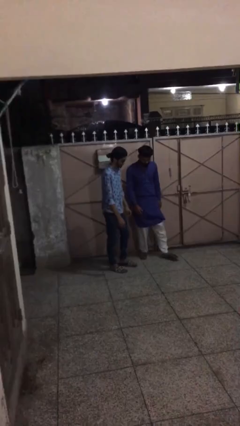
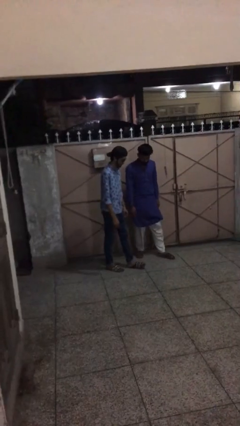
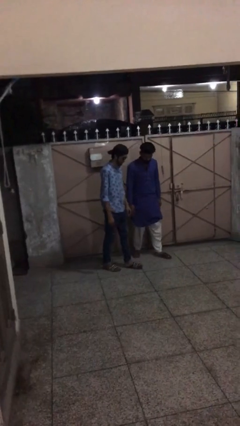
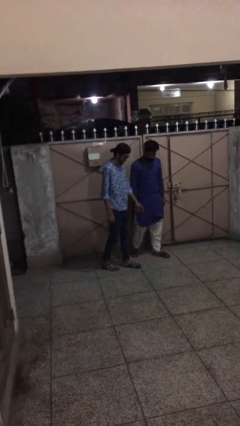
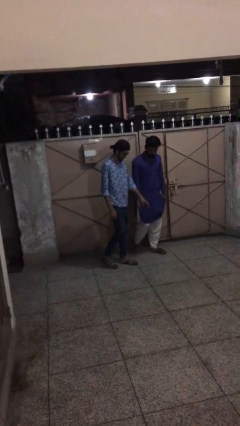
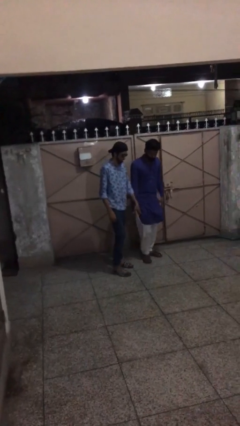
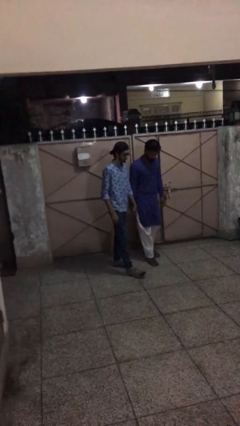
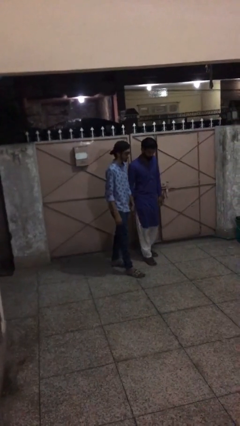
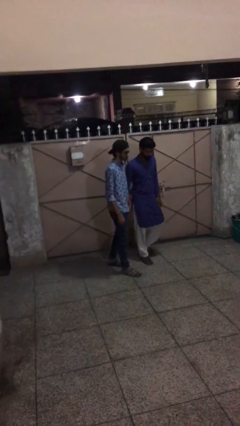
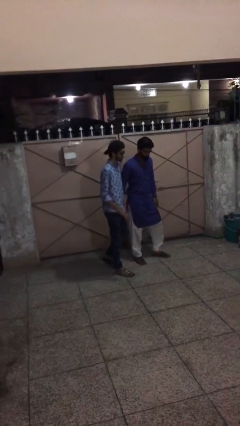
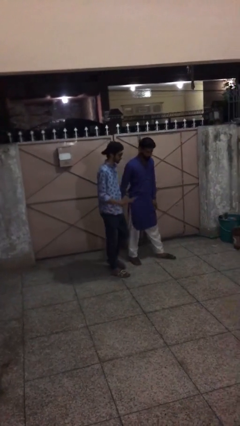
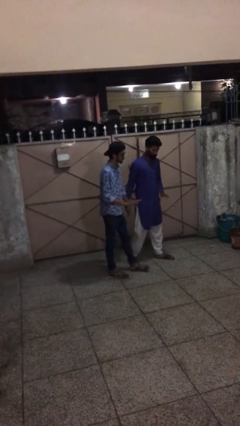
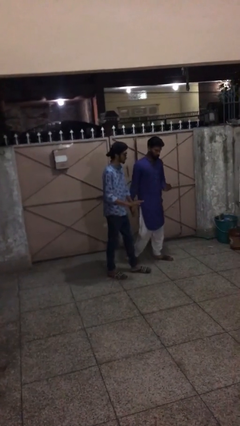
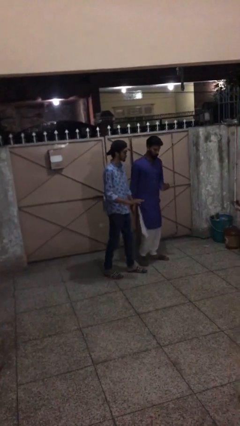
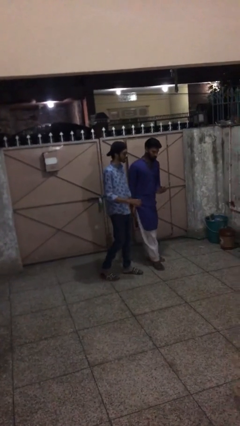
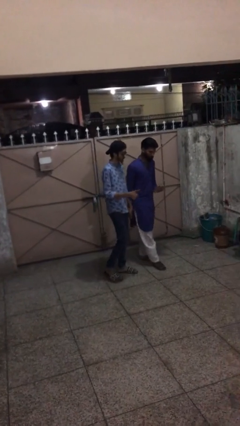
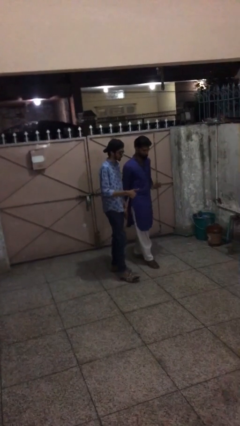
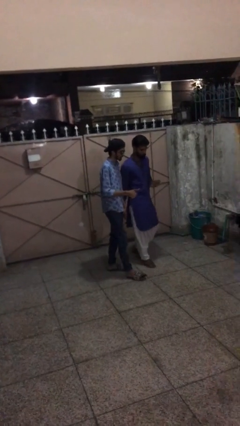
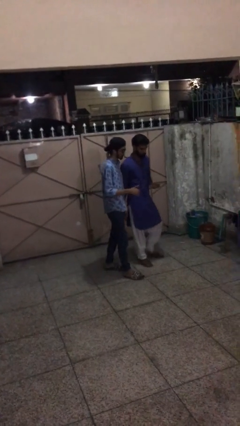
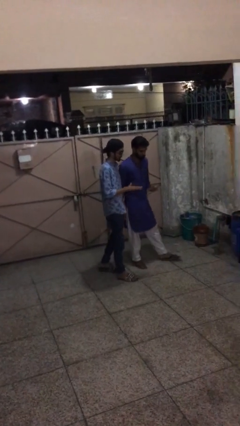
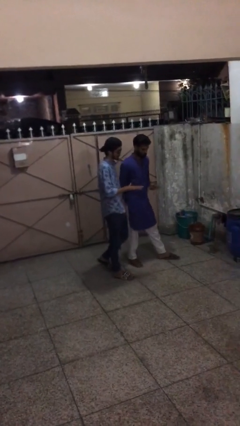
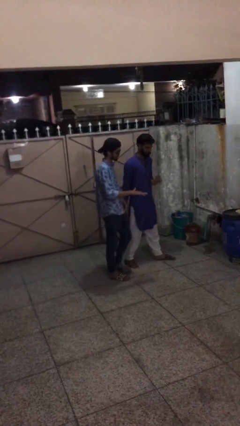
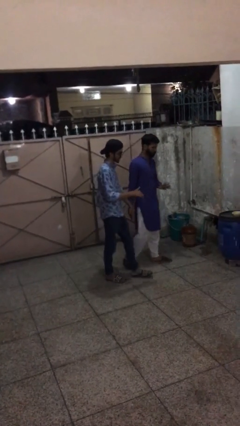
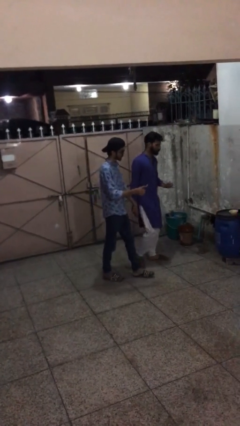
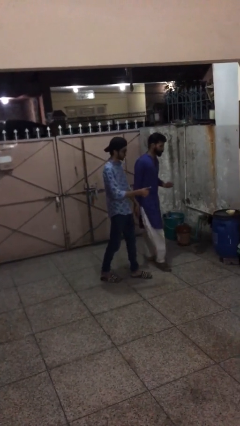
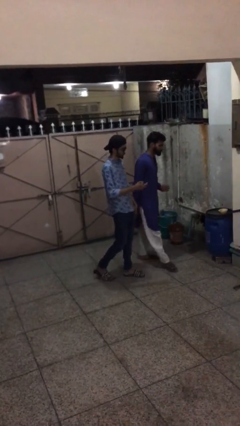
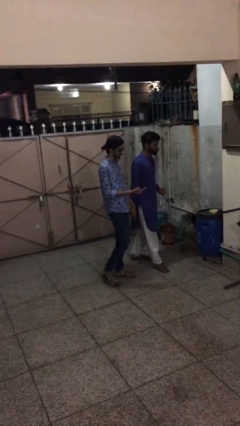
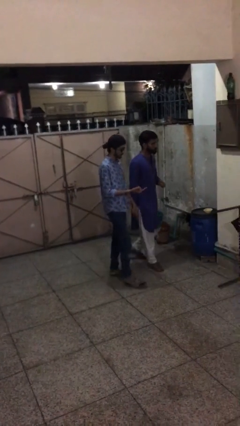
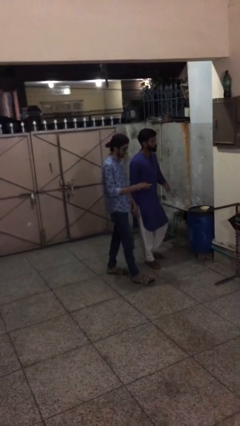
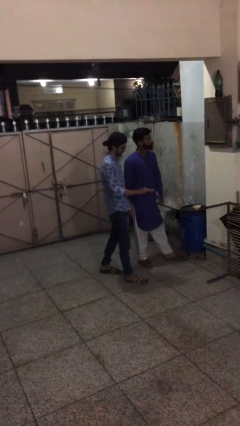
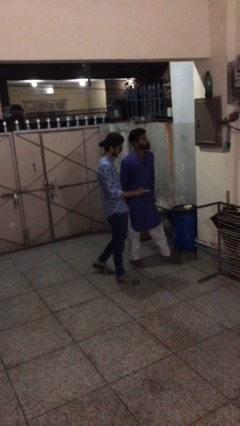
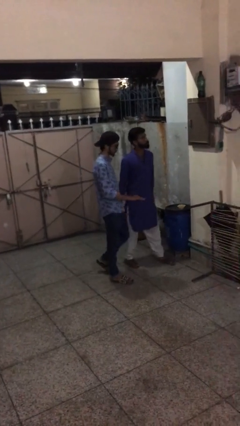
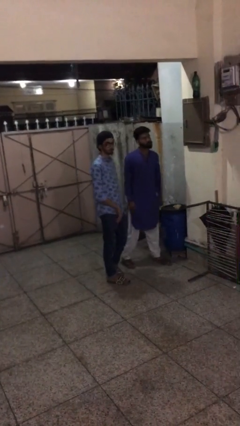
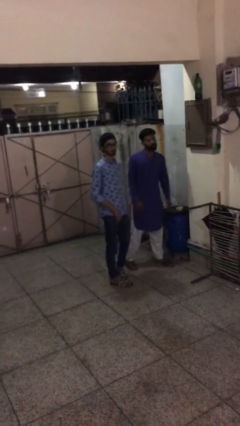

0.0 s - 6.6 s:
person holds hand

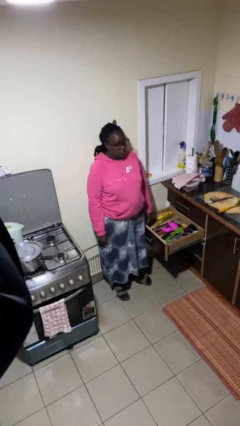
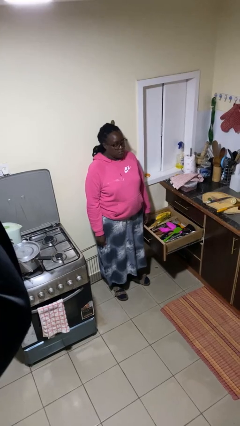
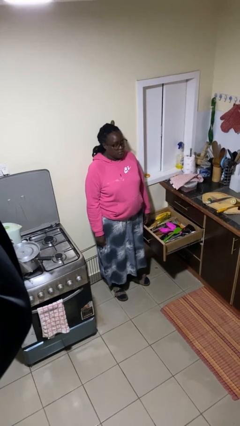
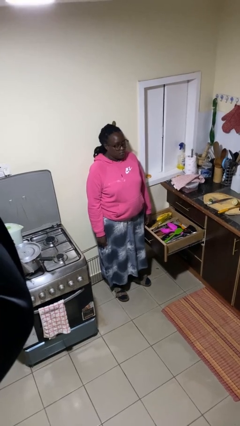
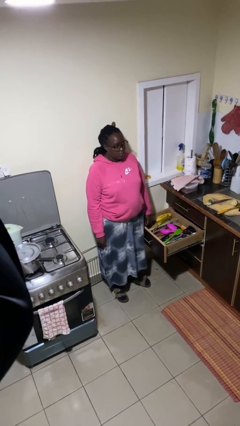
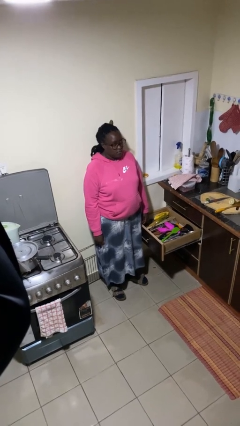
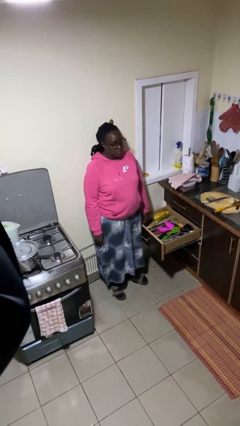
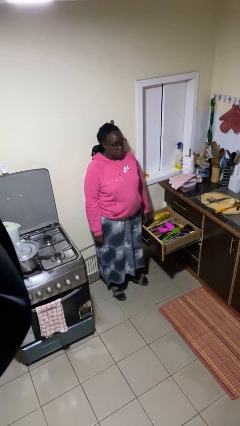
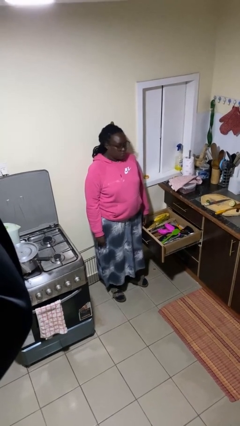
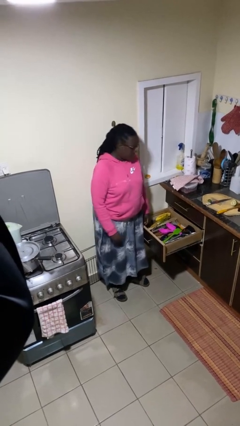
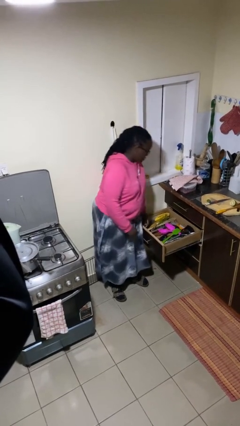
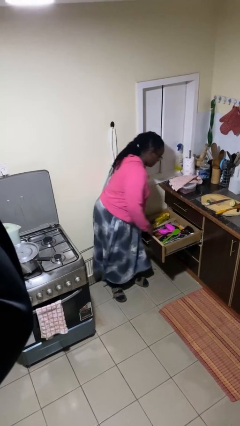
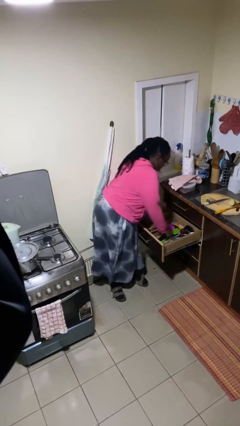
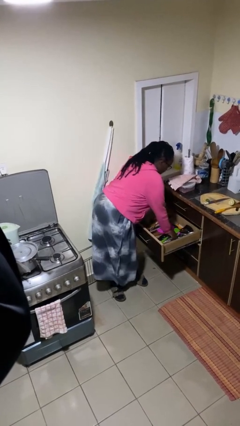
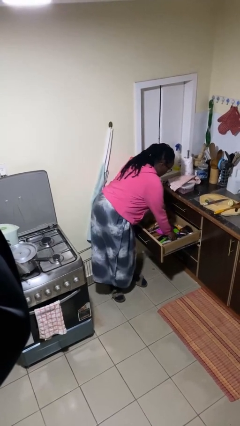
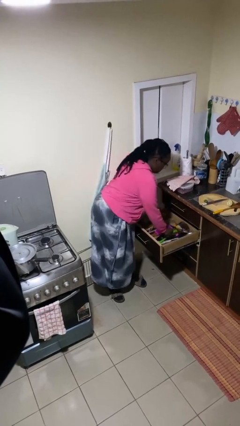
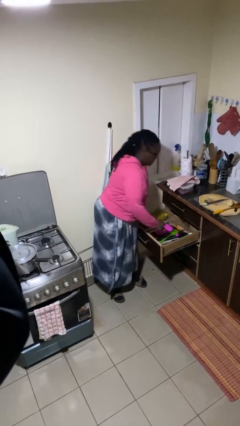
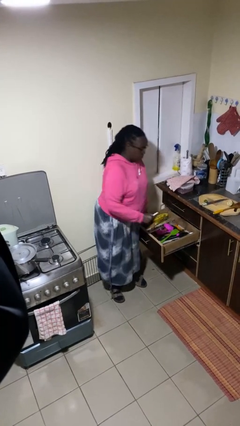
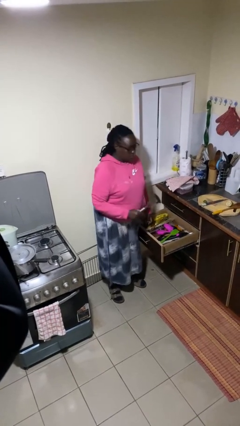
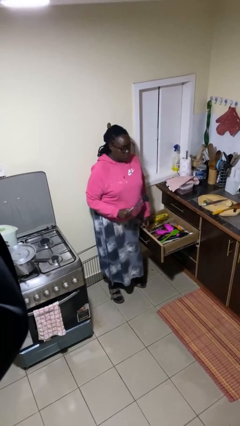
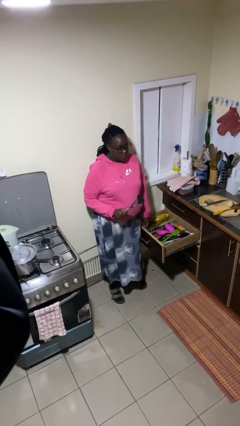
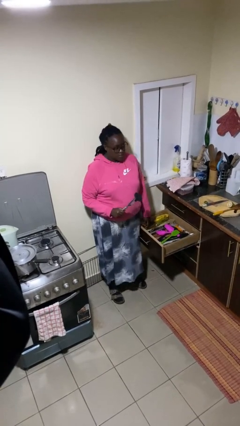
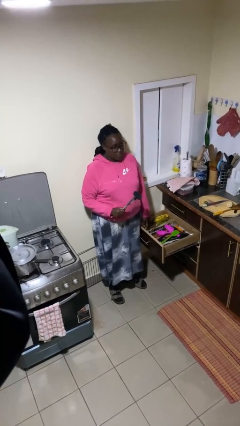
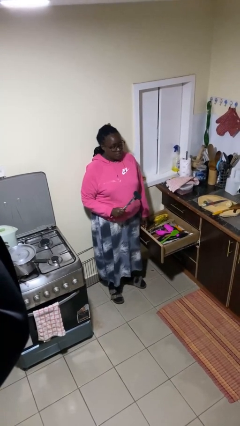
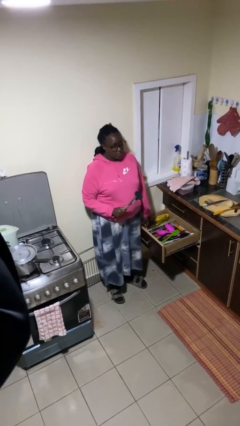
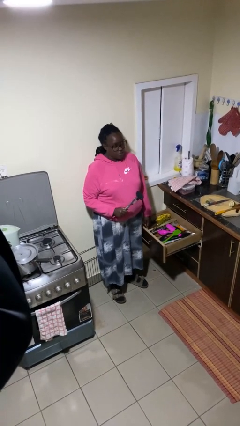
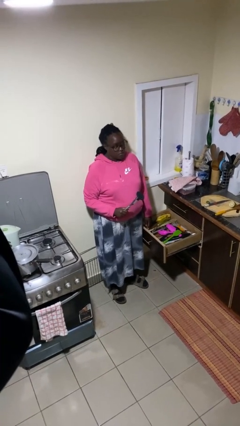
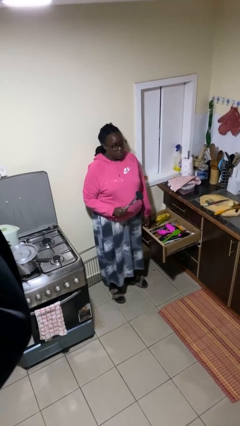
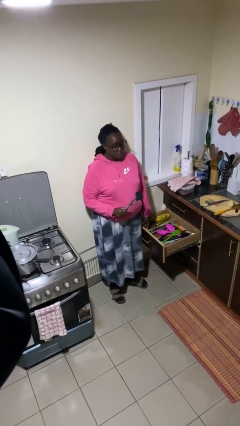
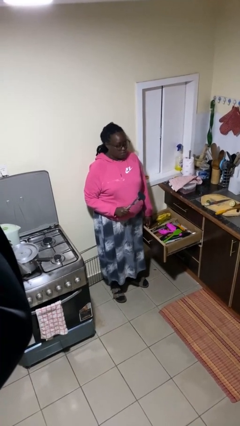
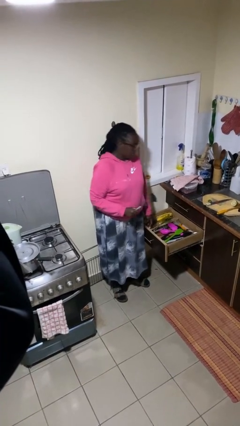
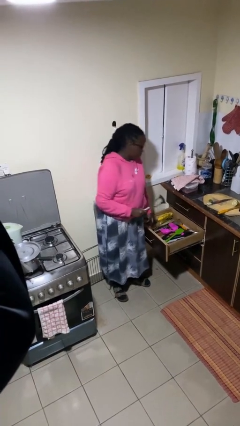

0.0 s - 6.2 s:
person takes object from kitchen drawer

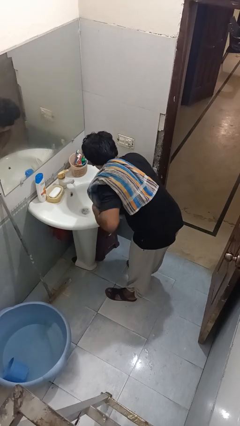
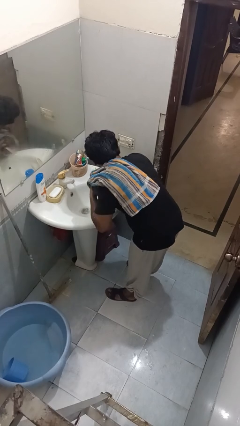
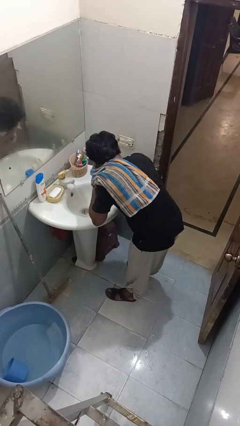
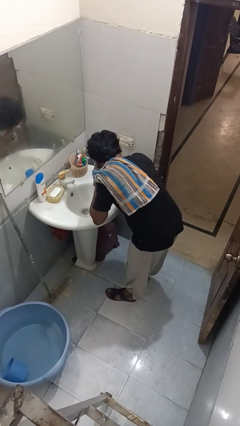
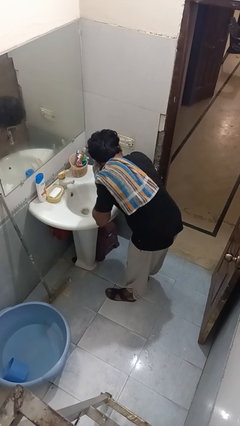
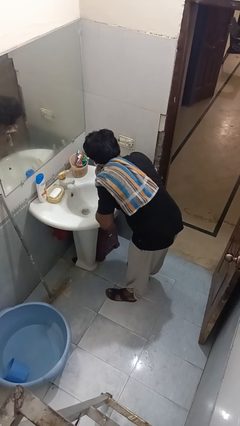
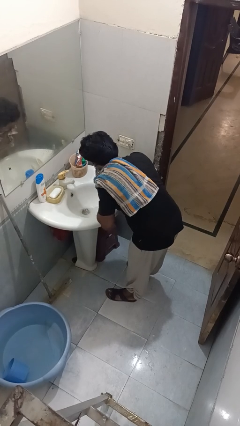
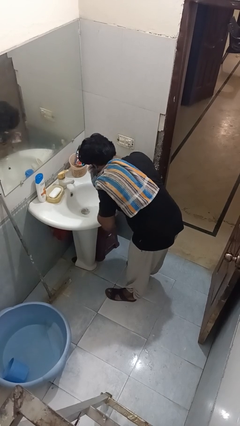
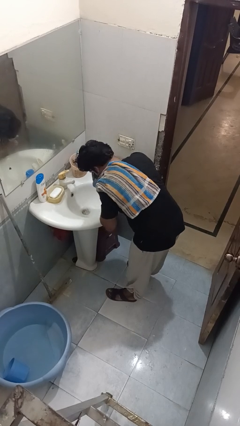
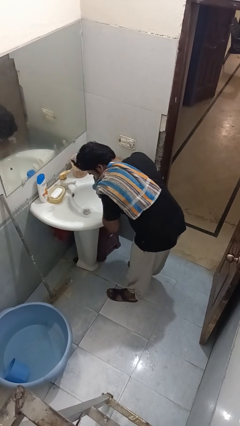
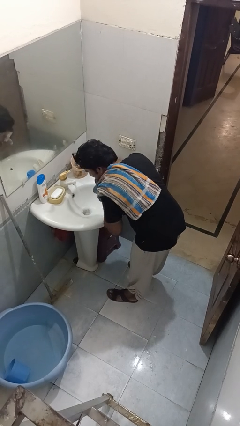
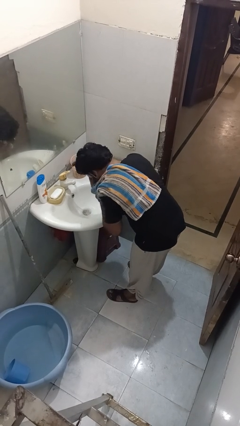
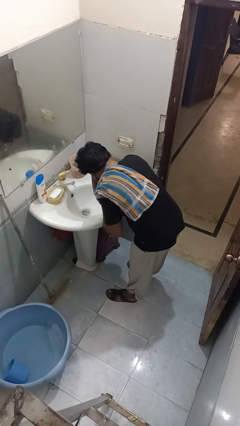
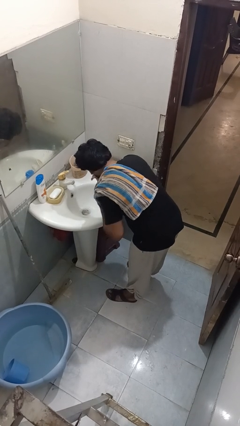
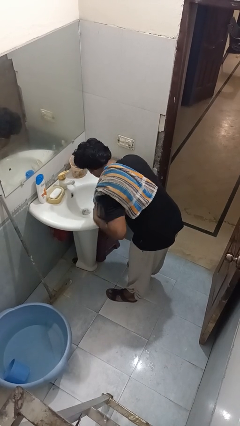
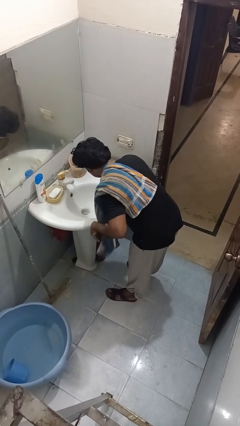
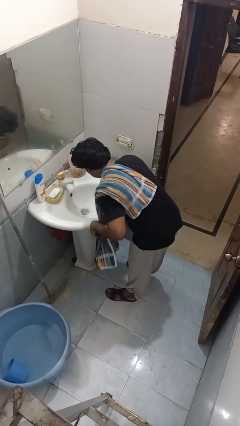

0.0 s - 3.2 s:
person dries face with towel

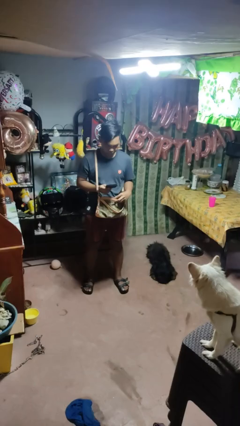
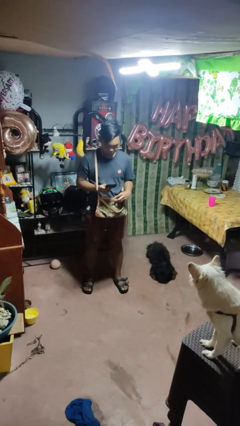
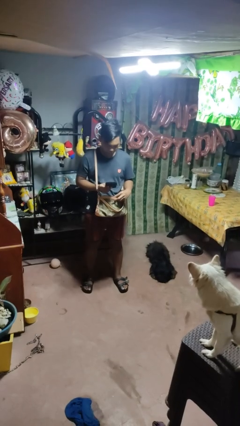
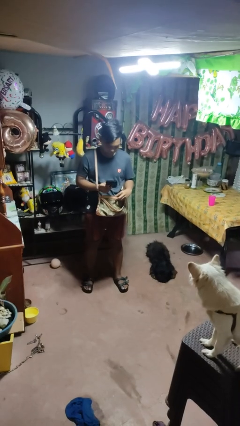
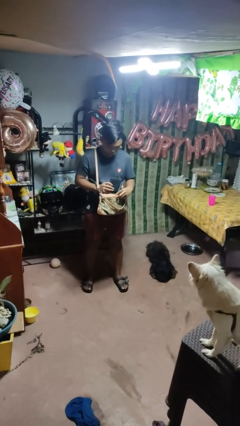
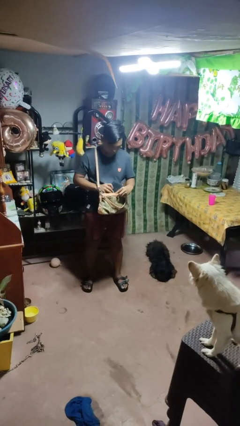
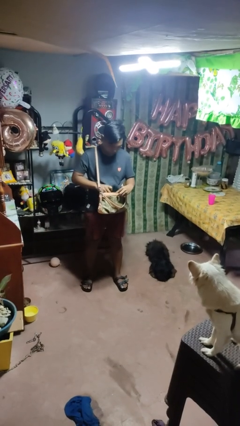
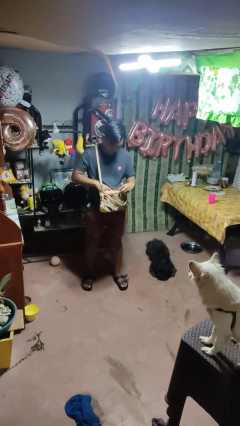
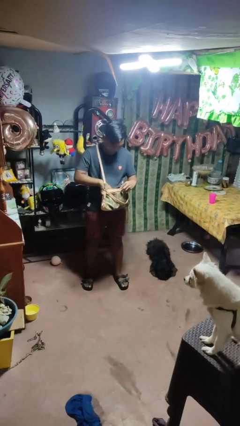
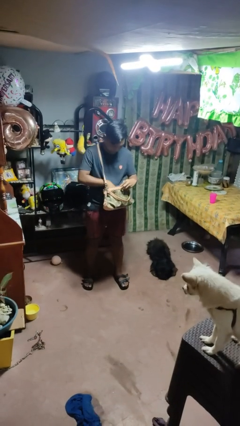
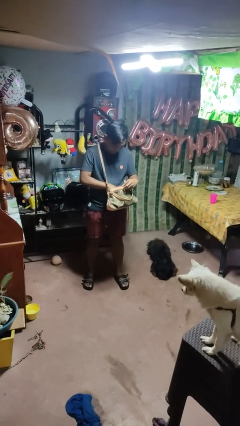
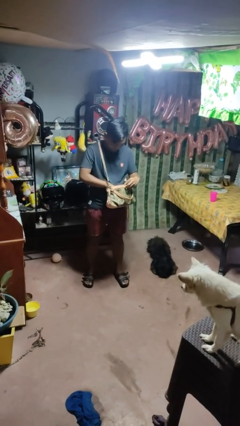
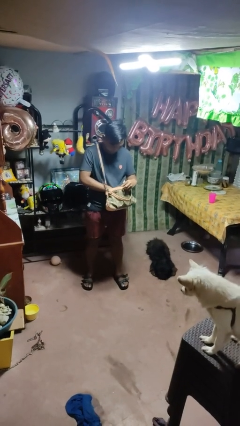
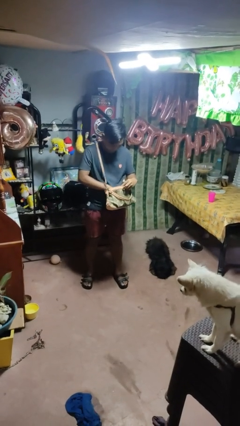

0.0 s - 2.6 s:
person puts object into purse
